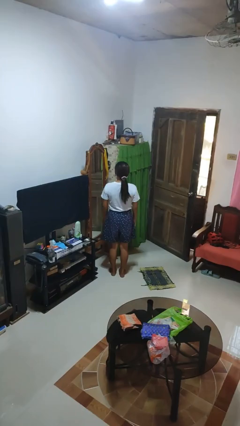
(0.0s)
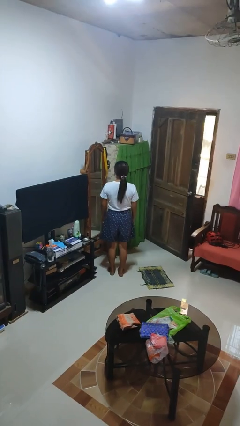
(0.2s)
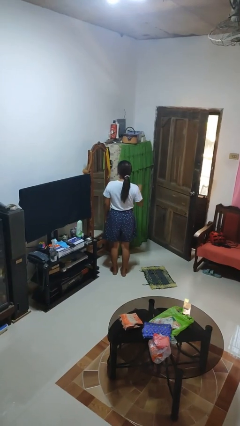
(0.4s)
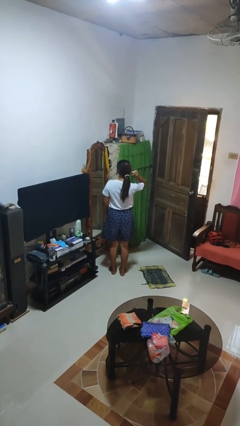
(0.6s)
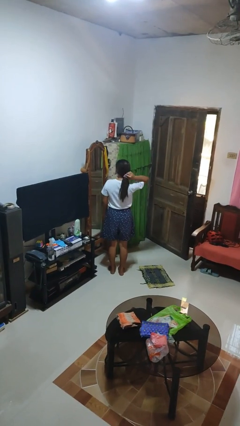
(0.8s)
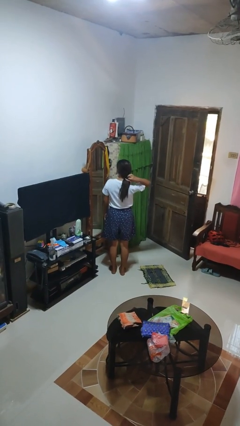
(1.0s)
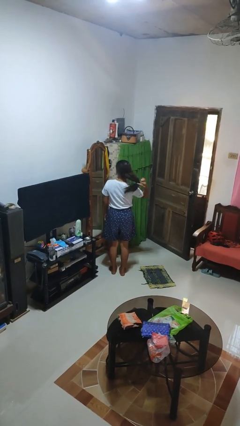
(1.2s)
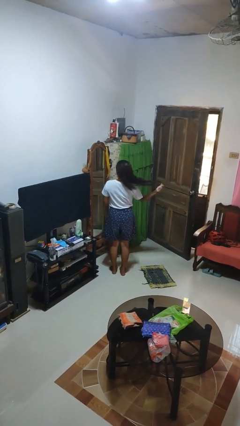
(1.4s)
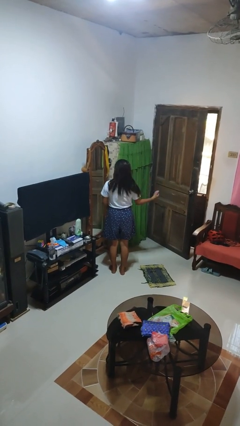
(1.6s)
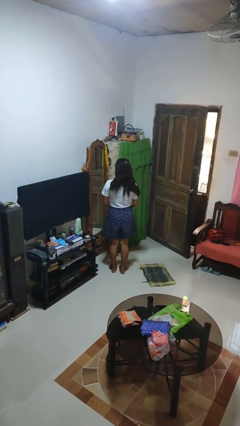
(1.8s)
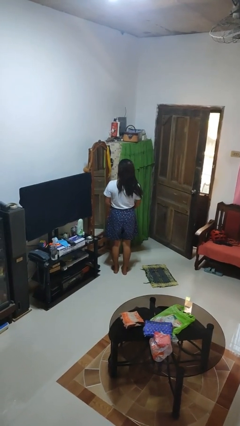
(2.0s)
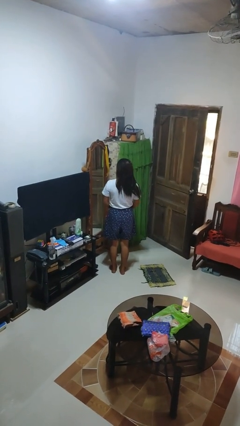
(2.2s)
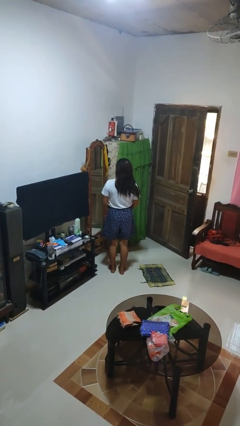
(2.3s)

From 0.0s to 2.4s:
person takes off hairtie

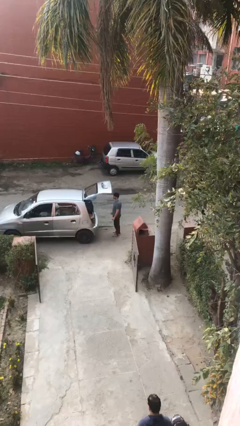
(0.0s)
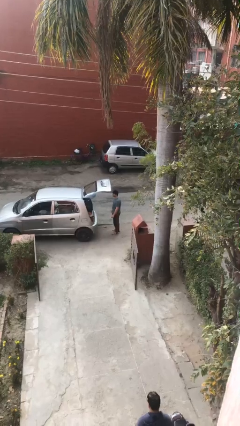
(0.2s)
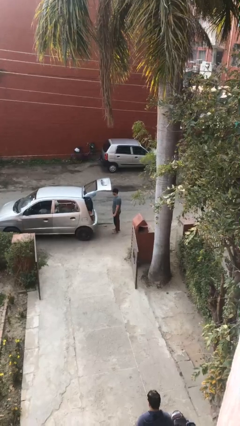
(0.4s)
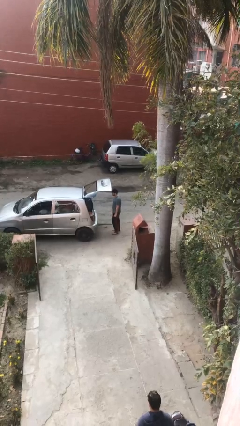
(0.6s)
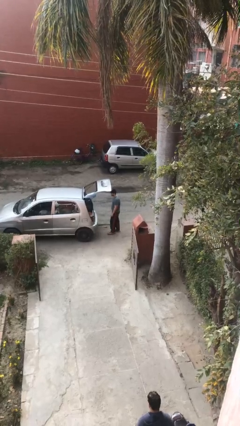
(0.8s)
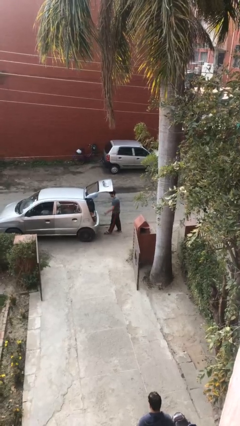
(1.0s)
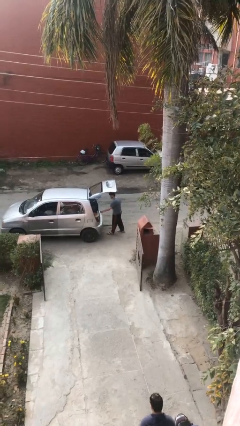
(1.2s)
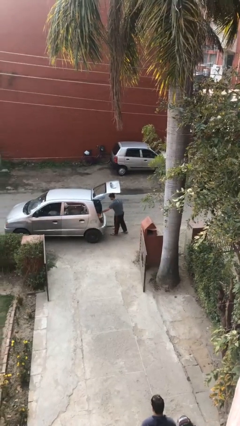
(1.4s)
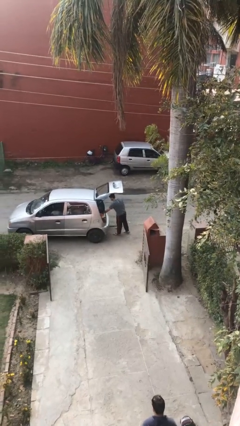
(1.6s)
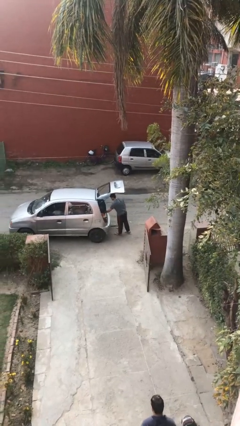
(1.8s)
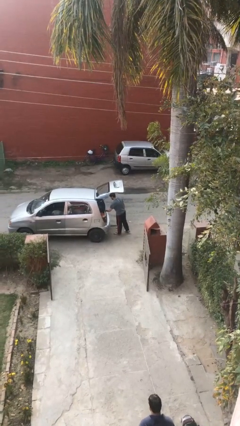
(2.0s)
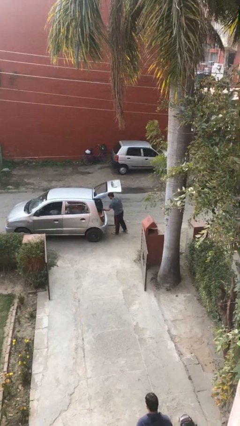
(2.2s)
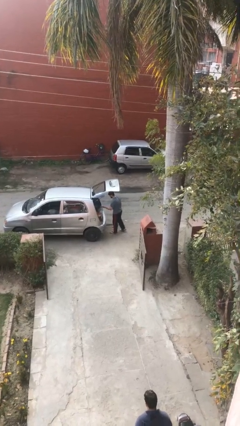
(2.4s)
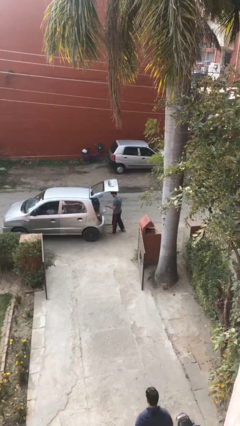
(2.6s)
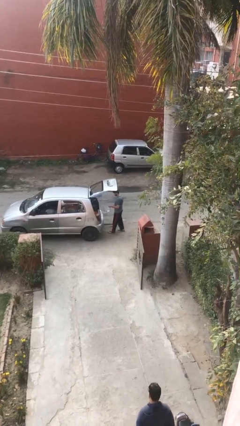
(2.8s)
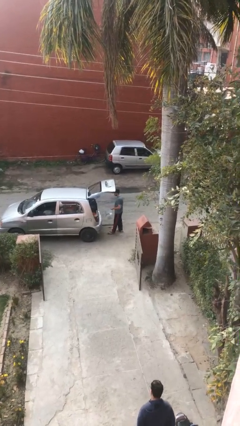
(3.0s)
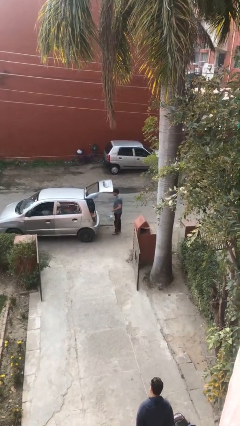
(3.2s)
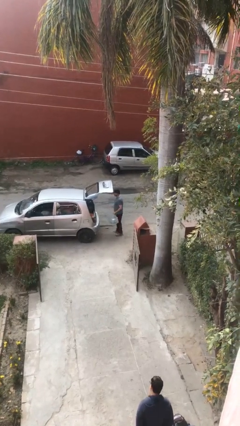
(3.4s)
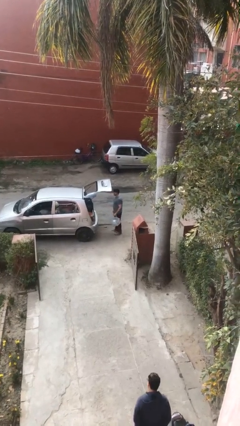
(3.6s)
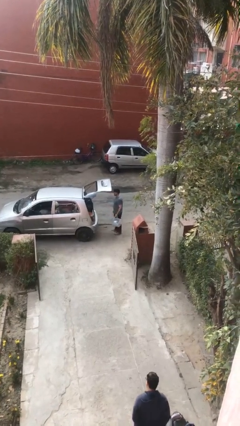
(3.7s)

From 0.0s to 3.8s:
person unloads car

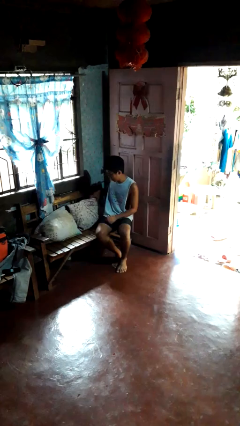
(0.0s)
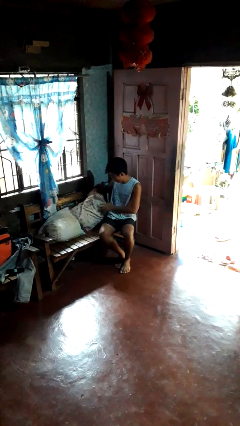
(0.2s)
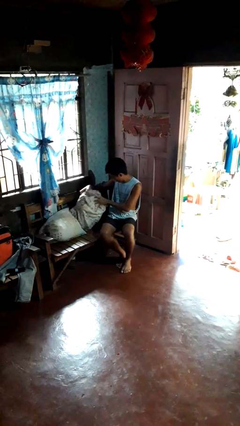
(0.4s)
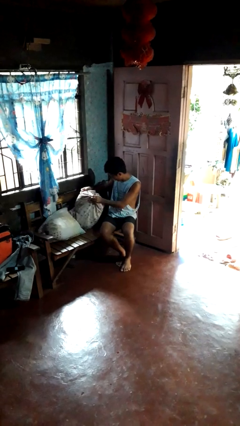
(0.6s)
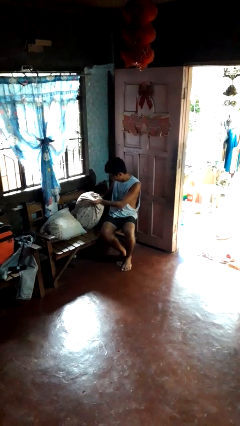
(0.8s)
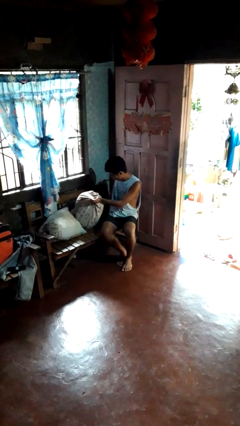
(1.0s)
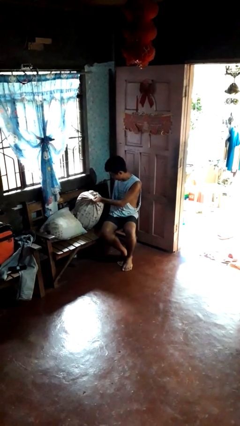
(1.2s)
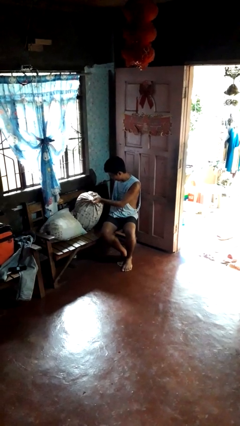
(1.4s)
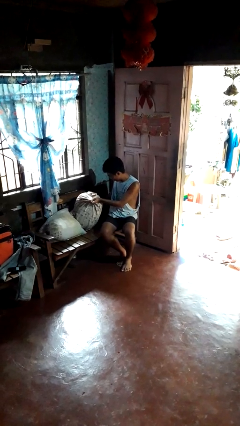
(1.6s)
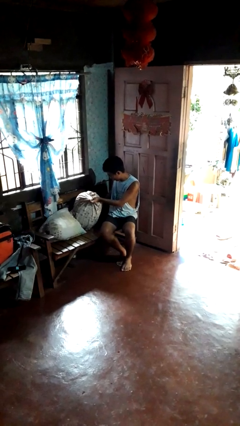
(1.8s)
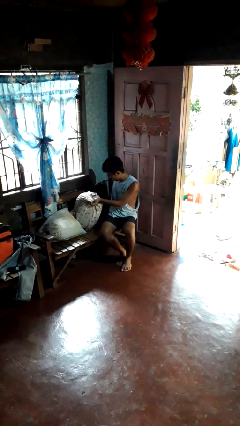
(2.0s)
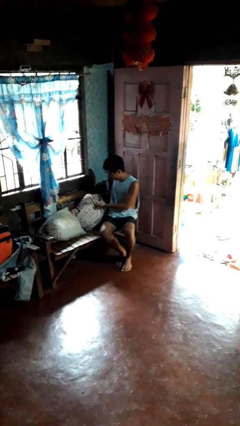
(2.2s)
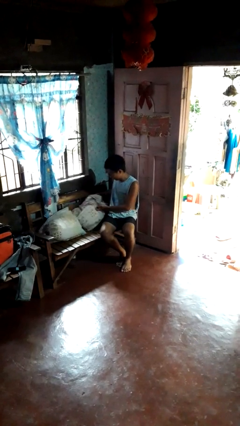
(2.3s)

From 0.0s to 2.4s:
person searches in couch

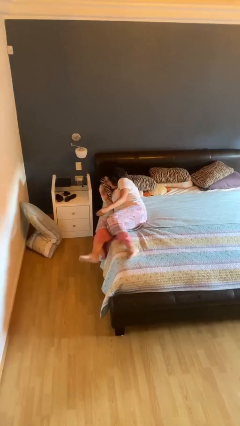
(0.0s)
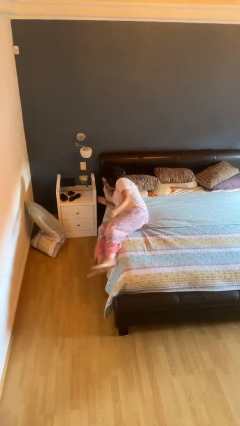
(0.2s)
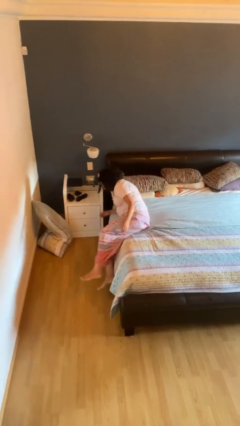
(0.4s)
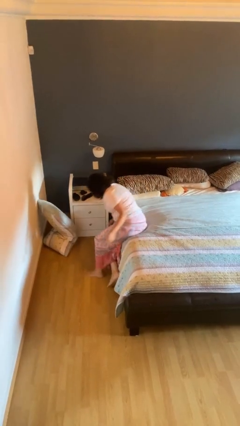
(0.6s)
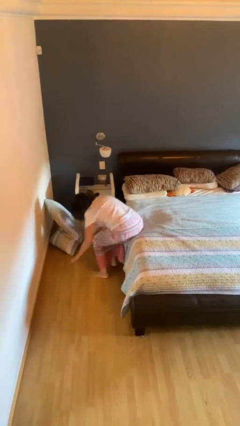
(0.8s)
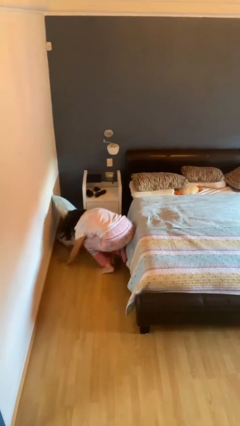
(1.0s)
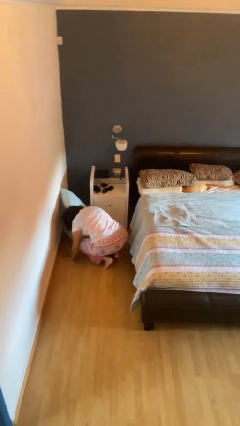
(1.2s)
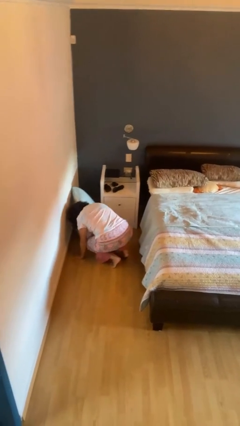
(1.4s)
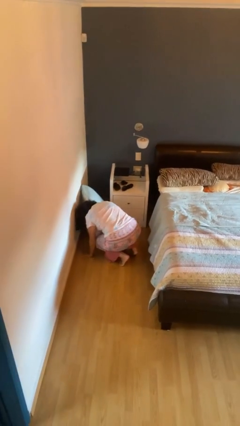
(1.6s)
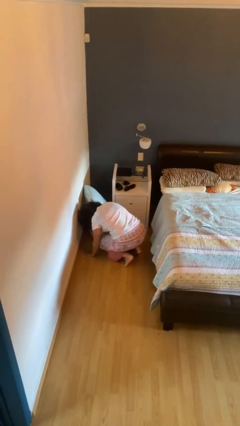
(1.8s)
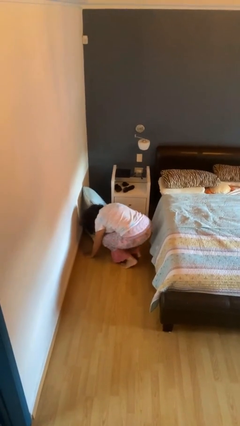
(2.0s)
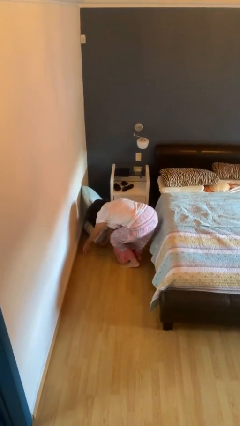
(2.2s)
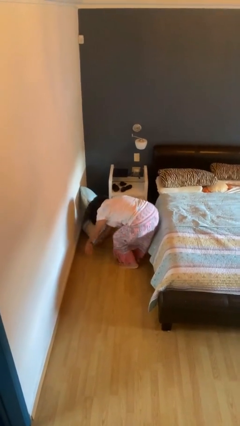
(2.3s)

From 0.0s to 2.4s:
person falls from bed

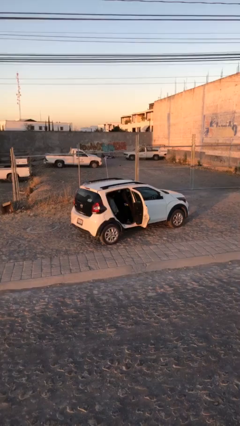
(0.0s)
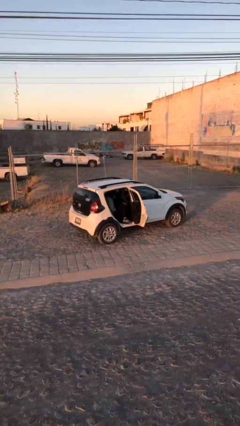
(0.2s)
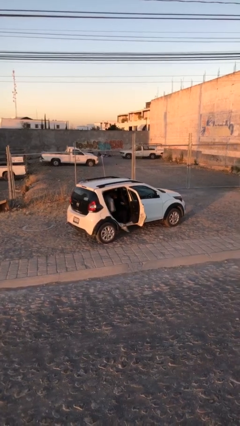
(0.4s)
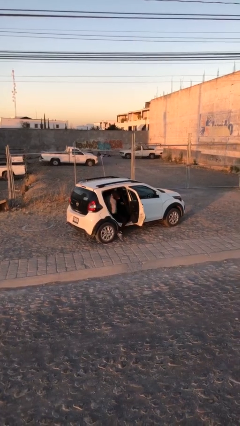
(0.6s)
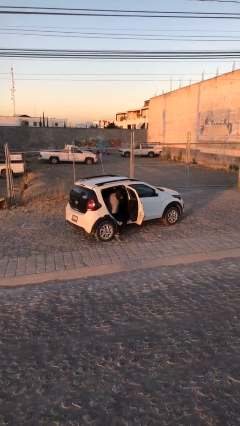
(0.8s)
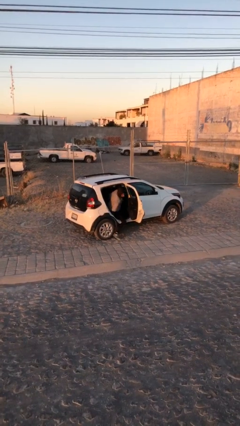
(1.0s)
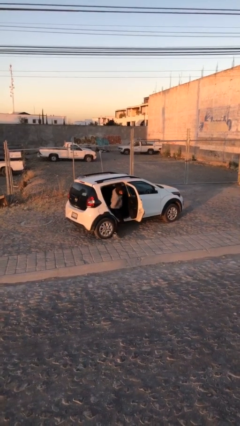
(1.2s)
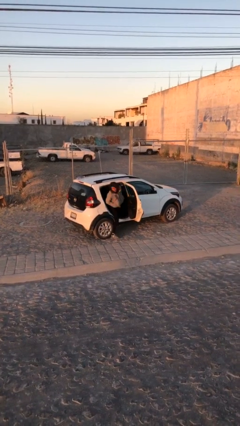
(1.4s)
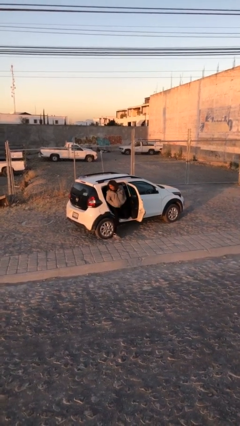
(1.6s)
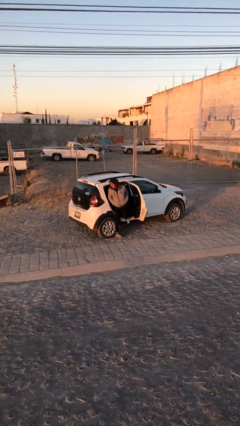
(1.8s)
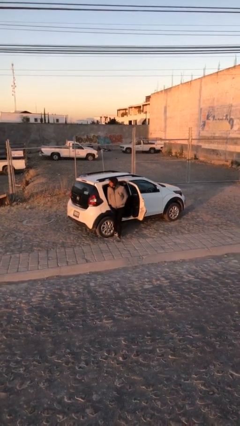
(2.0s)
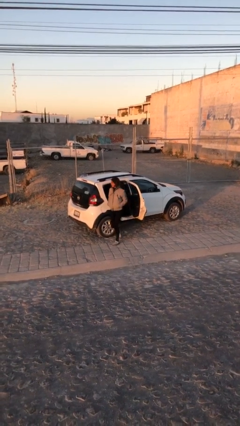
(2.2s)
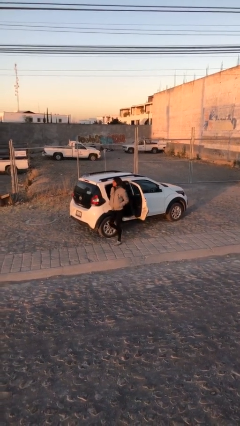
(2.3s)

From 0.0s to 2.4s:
person exits car

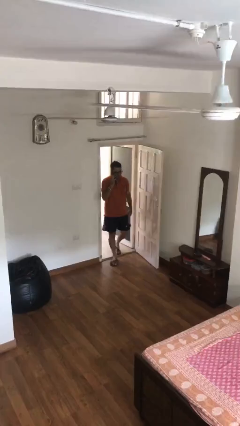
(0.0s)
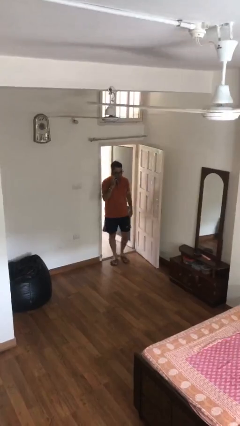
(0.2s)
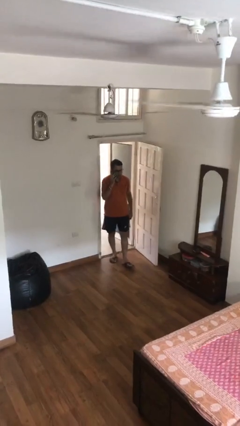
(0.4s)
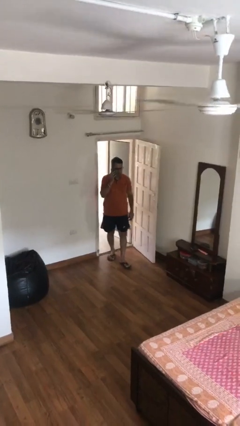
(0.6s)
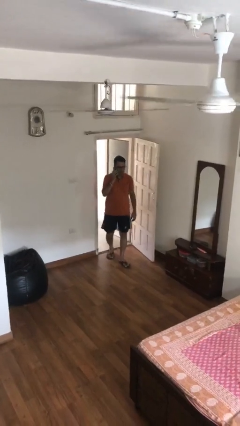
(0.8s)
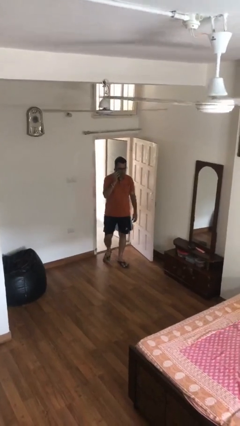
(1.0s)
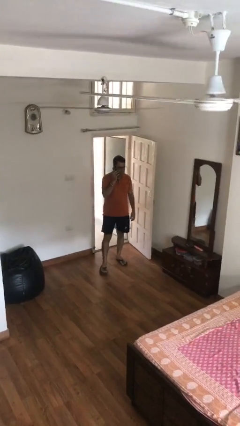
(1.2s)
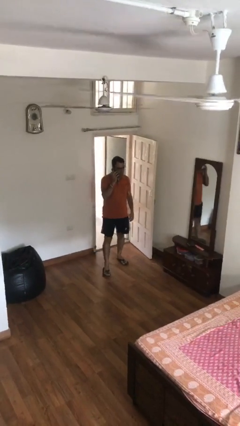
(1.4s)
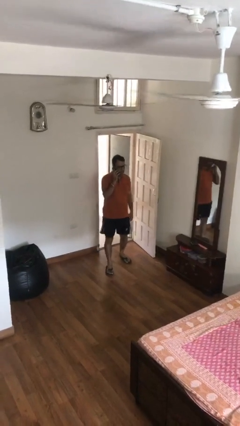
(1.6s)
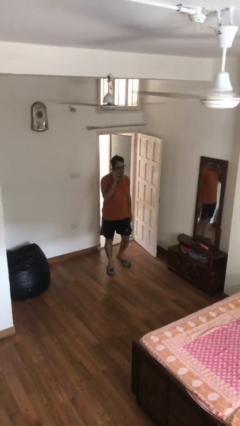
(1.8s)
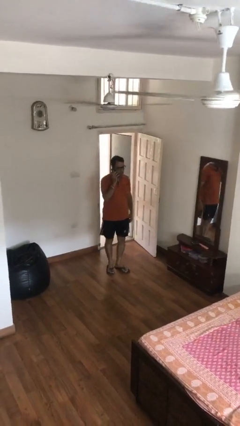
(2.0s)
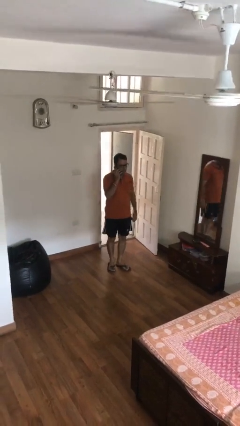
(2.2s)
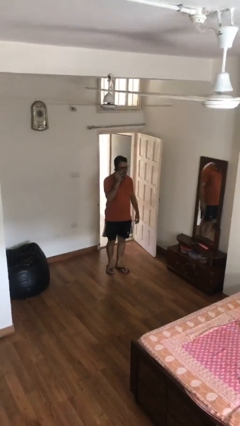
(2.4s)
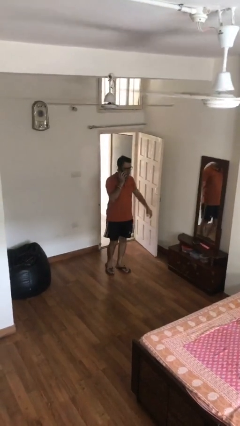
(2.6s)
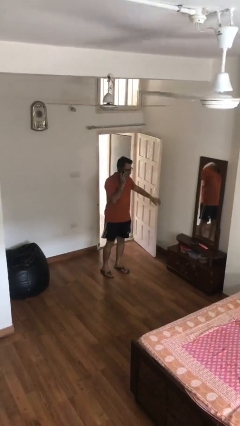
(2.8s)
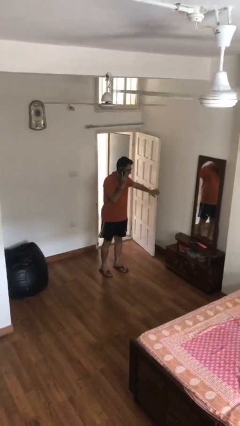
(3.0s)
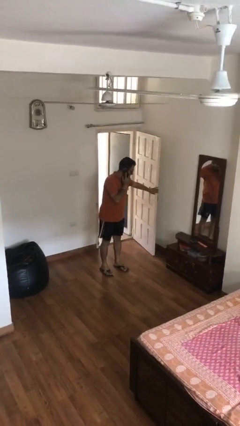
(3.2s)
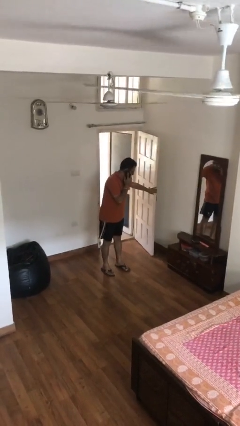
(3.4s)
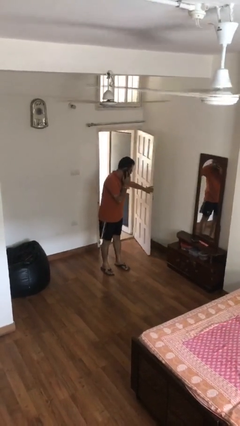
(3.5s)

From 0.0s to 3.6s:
person enters scene through structure

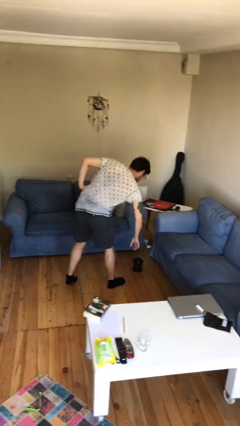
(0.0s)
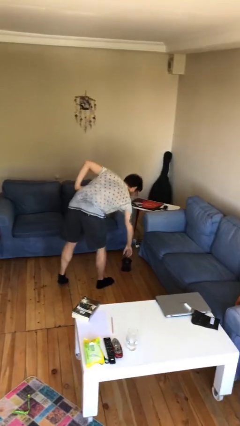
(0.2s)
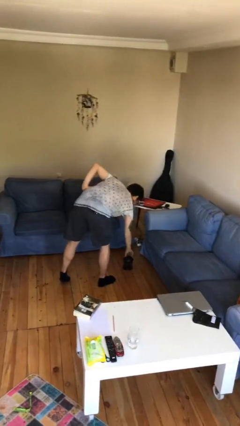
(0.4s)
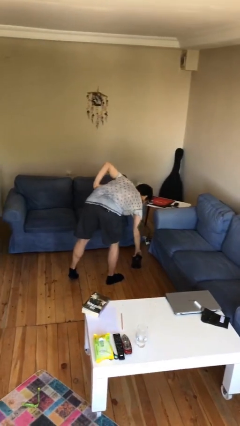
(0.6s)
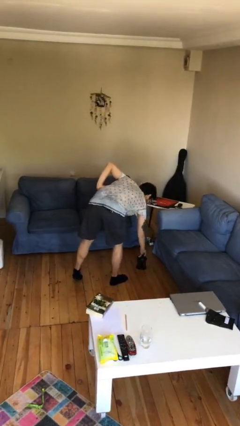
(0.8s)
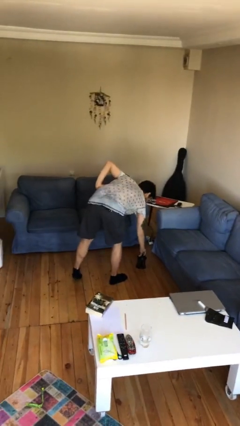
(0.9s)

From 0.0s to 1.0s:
person picks up object from floor
